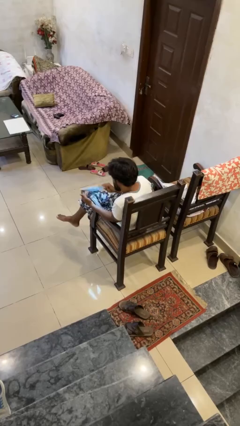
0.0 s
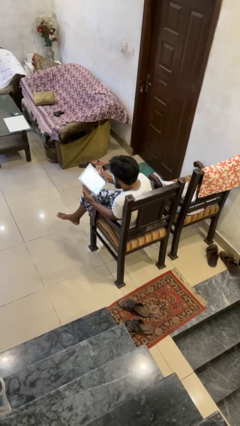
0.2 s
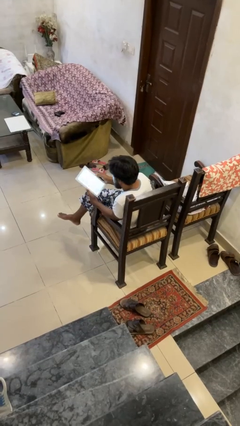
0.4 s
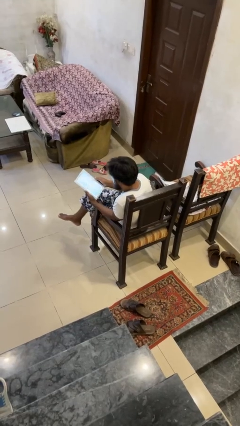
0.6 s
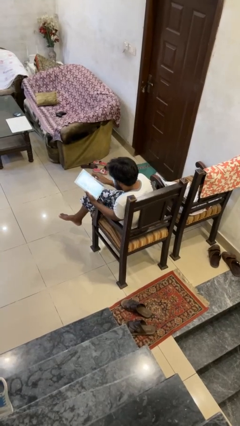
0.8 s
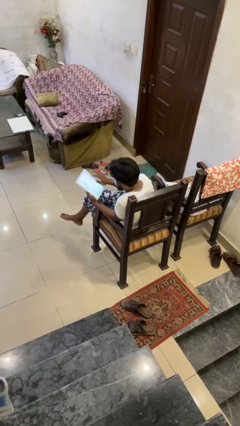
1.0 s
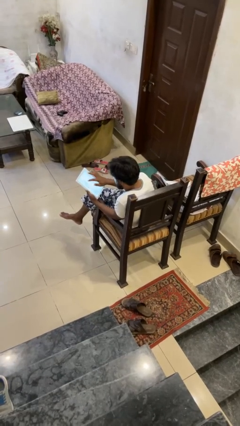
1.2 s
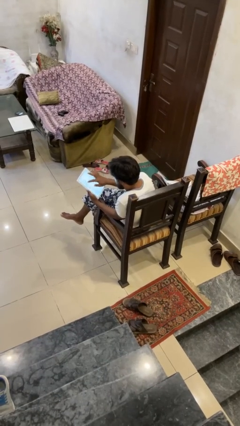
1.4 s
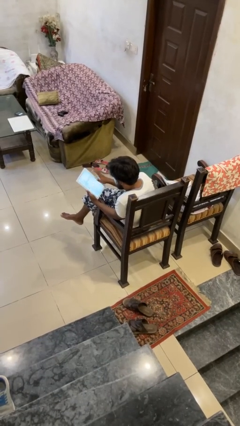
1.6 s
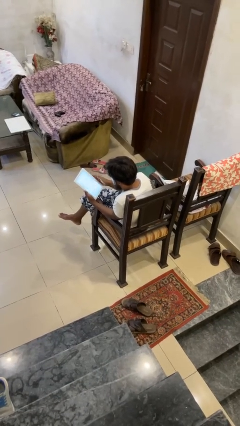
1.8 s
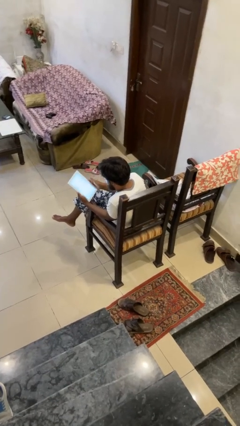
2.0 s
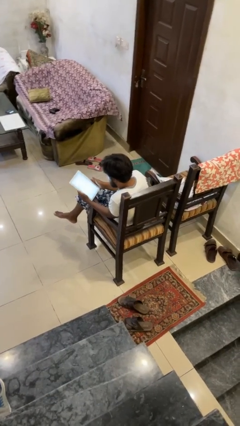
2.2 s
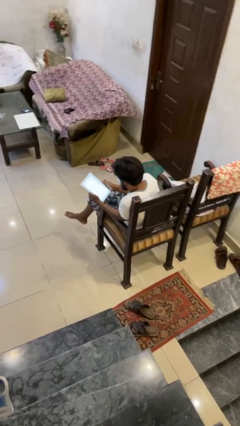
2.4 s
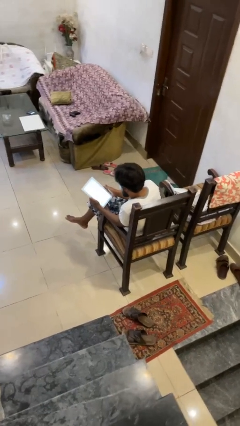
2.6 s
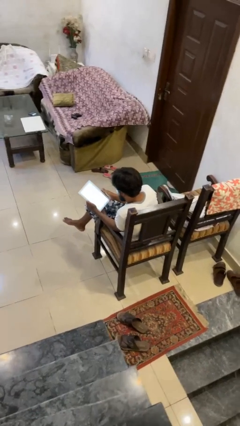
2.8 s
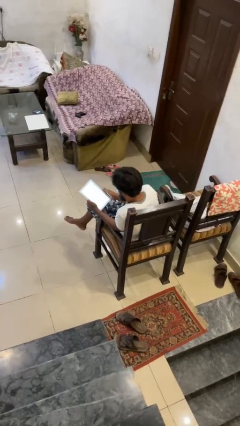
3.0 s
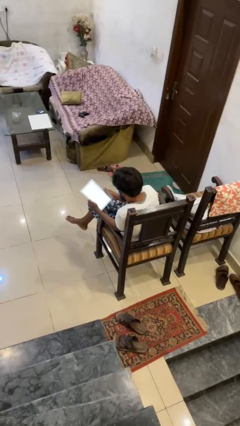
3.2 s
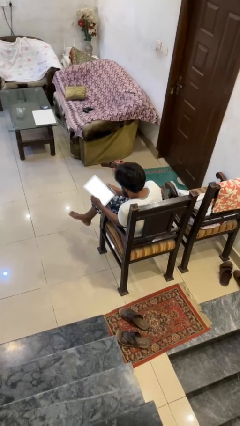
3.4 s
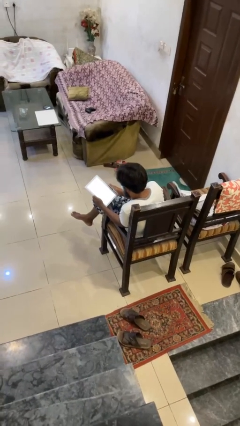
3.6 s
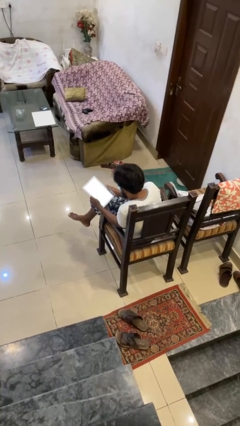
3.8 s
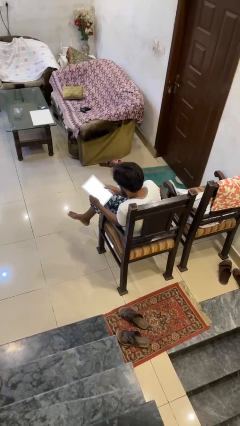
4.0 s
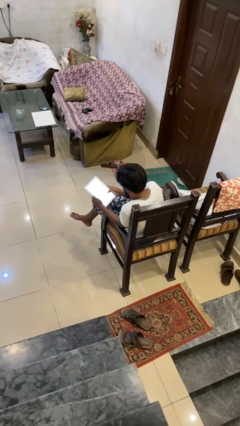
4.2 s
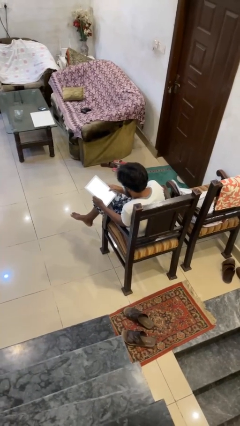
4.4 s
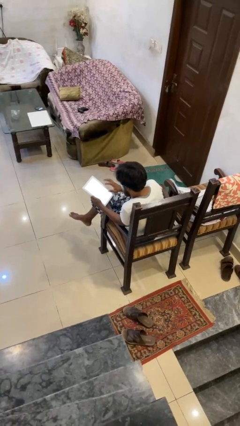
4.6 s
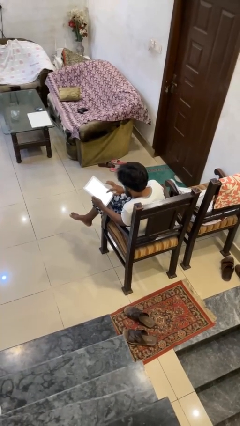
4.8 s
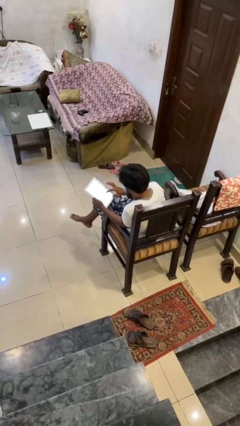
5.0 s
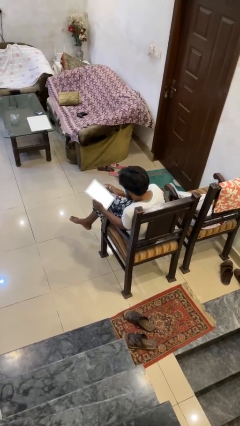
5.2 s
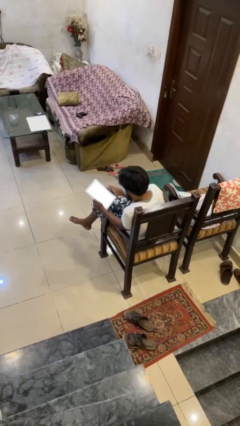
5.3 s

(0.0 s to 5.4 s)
person interacts with tablet

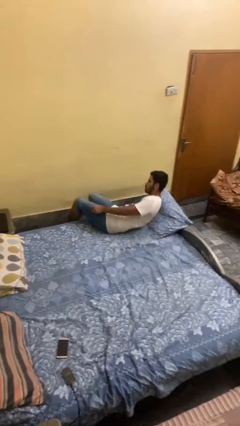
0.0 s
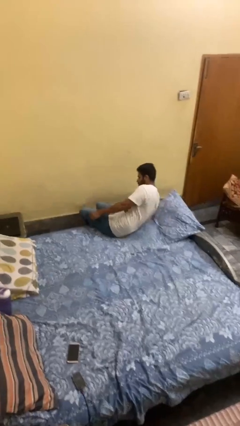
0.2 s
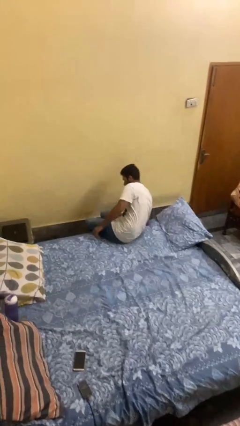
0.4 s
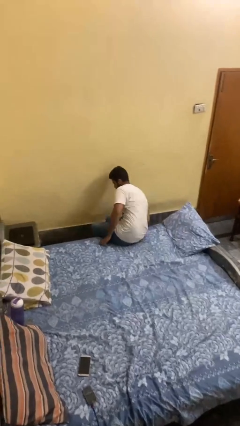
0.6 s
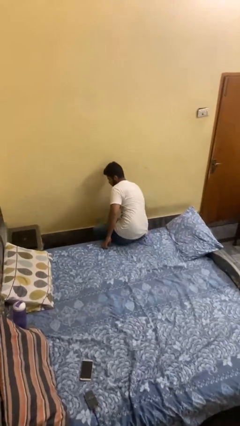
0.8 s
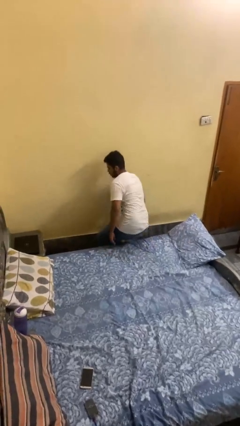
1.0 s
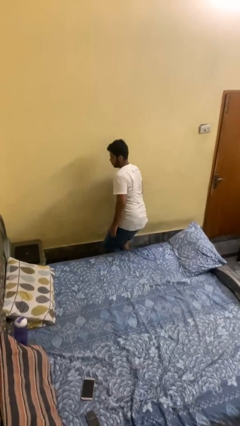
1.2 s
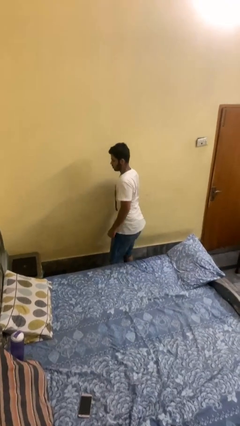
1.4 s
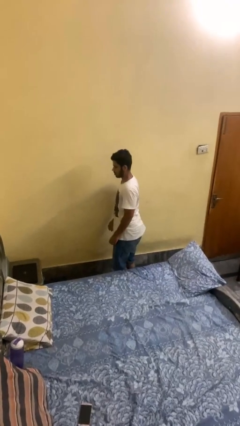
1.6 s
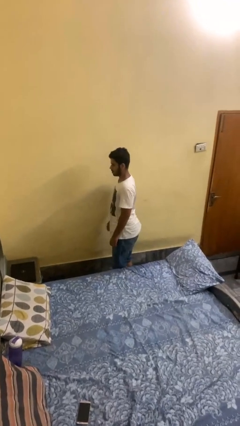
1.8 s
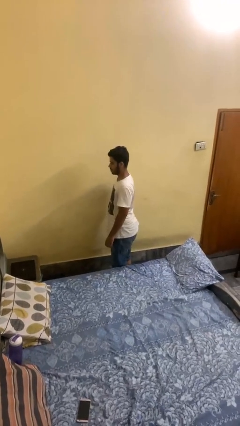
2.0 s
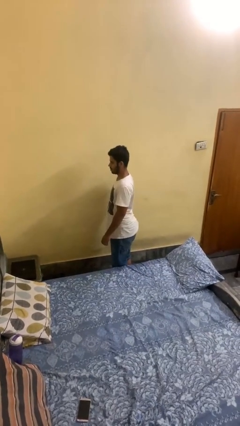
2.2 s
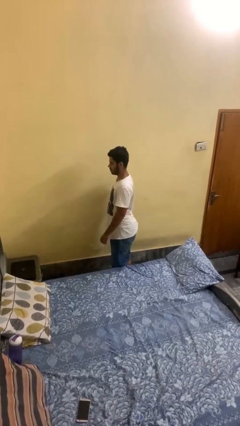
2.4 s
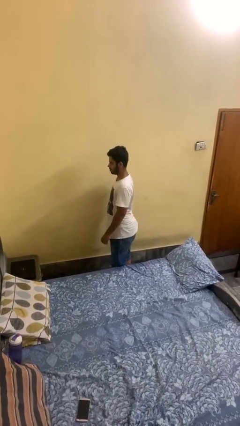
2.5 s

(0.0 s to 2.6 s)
person stands up

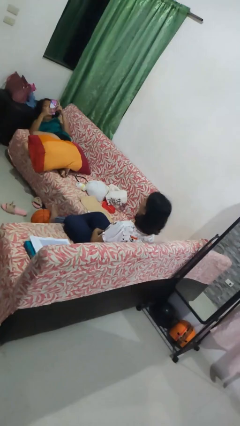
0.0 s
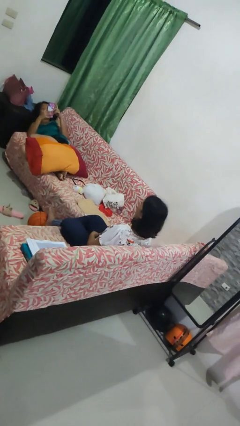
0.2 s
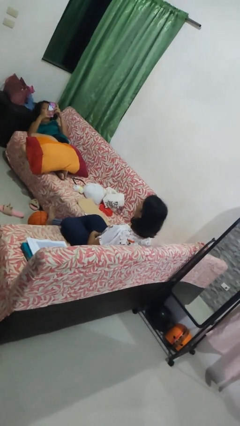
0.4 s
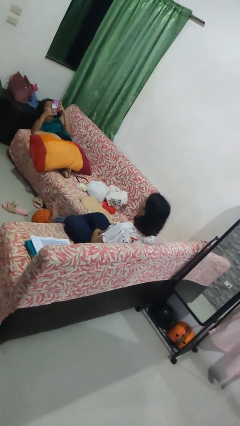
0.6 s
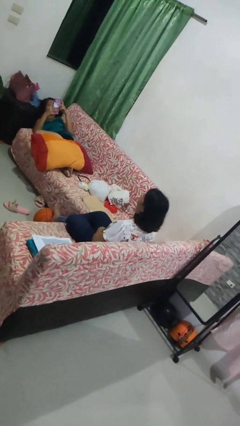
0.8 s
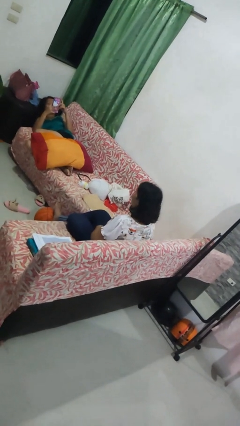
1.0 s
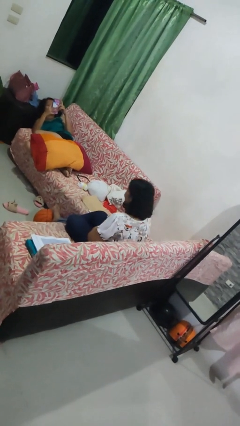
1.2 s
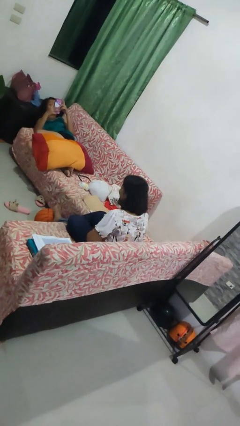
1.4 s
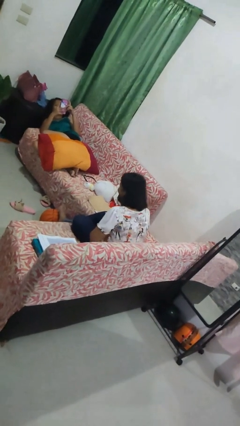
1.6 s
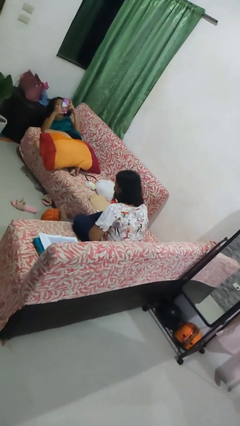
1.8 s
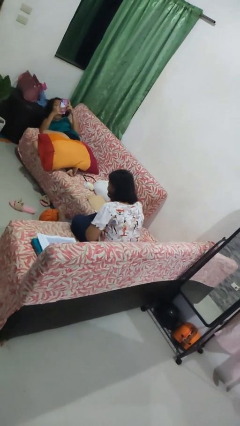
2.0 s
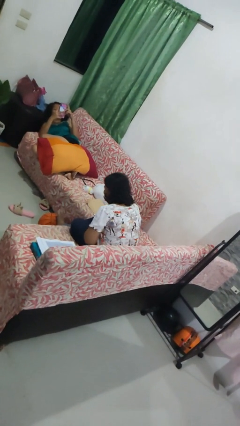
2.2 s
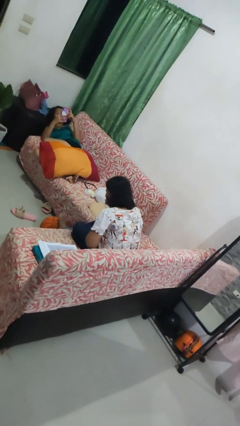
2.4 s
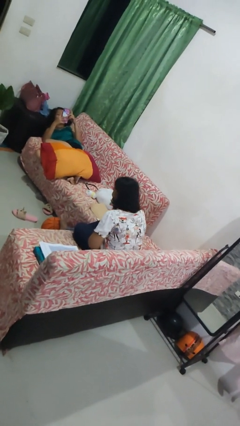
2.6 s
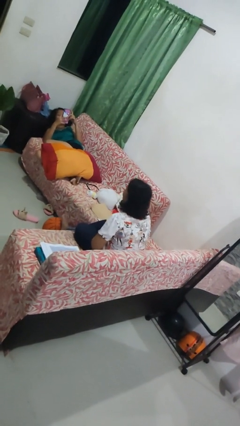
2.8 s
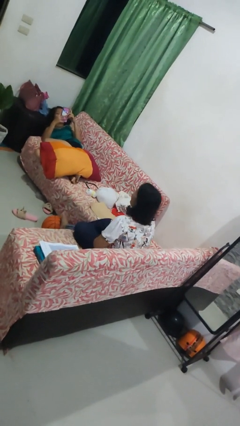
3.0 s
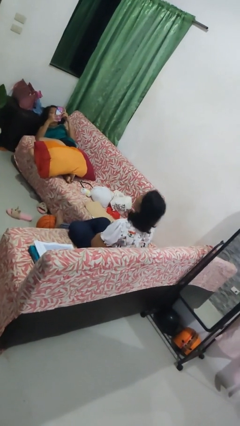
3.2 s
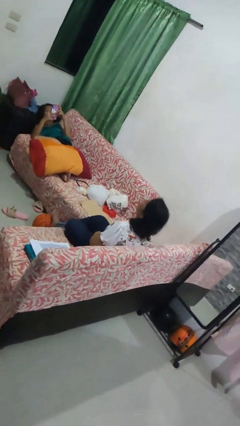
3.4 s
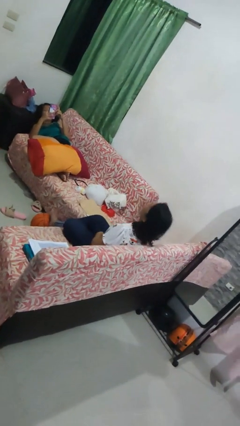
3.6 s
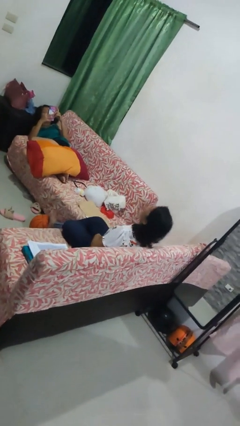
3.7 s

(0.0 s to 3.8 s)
person laughs with person

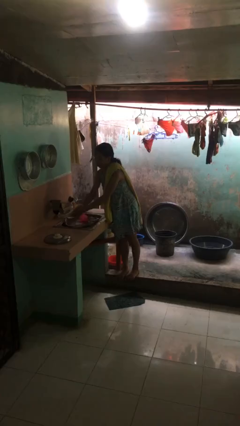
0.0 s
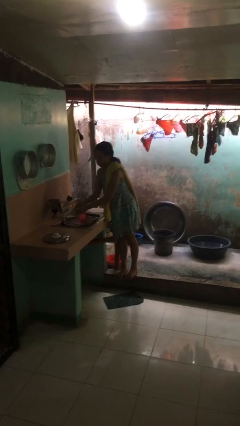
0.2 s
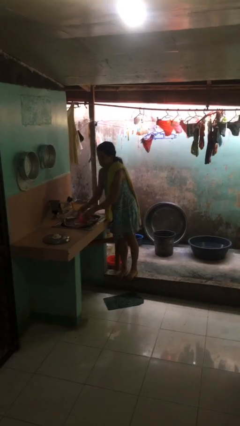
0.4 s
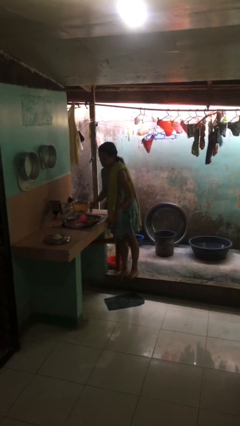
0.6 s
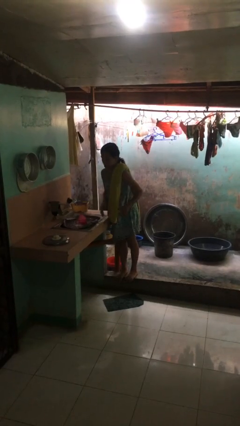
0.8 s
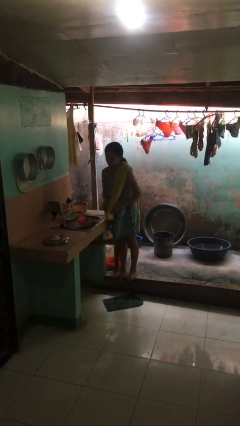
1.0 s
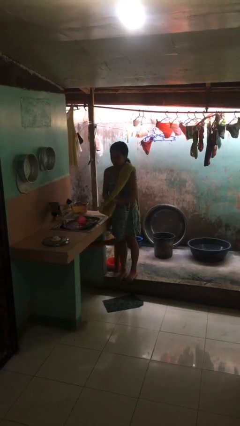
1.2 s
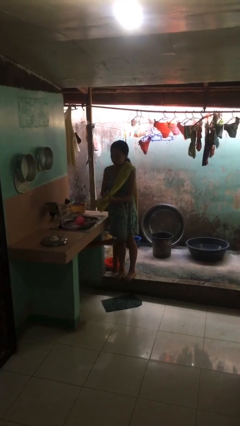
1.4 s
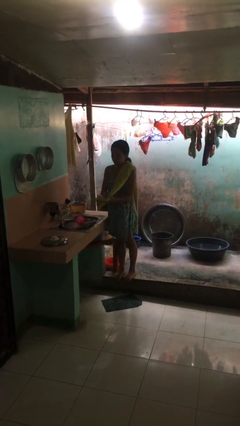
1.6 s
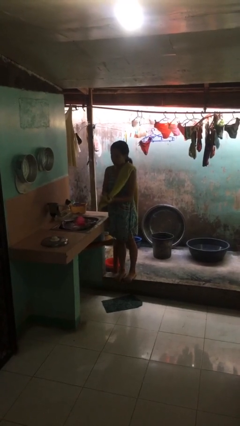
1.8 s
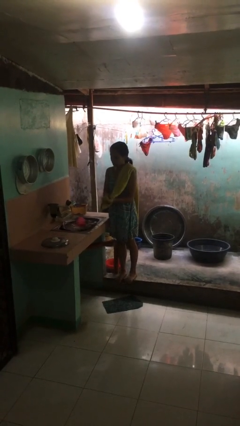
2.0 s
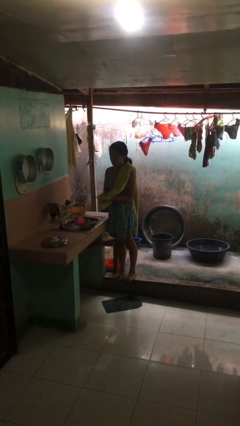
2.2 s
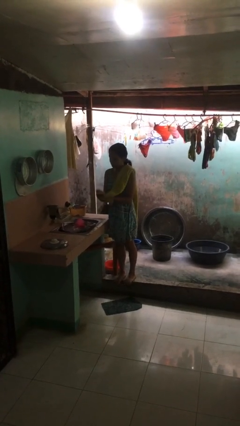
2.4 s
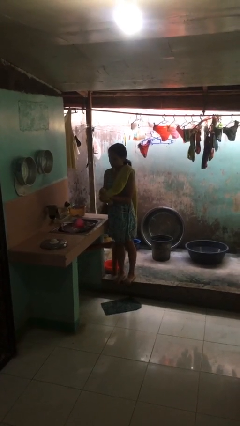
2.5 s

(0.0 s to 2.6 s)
person dries hands with towel

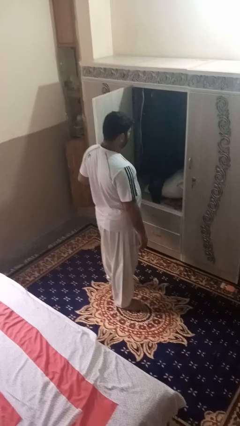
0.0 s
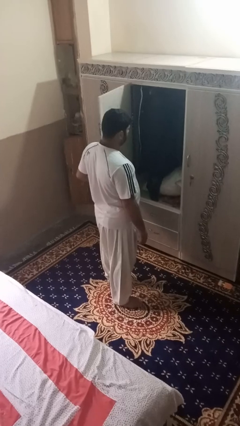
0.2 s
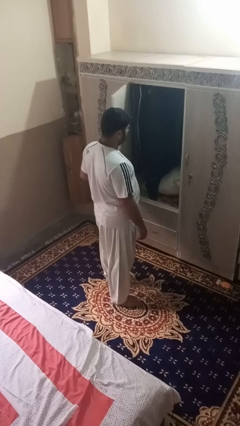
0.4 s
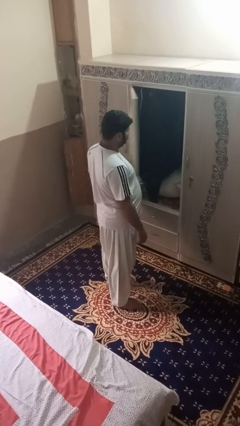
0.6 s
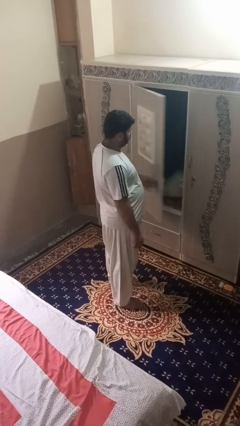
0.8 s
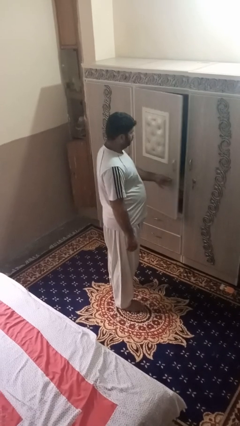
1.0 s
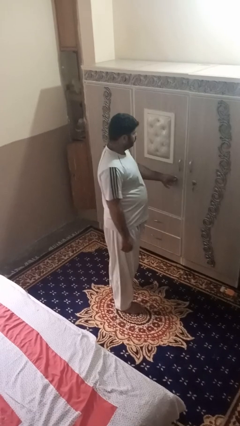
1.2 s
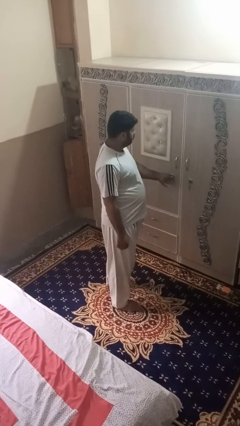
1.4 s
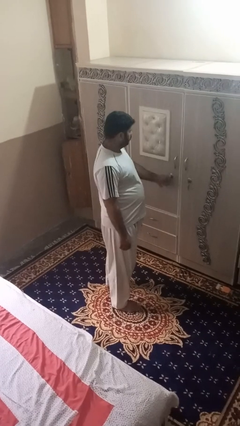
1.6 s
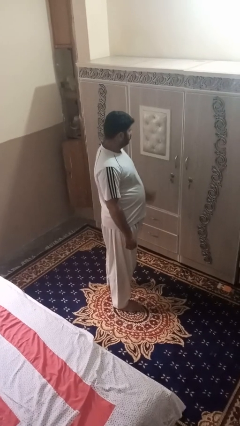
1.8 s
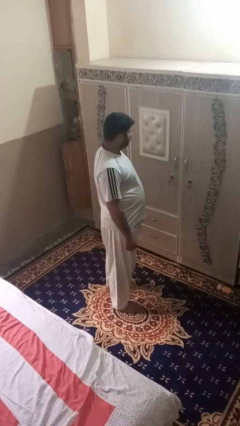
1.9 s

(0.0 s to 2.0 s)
person closes dresser drawer

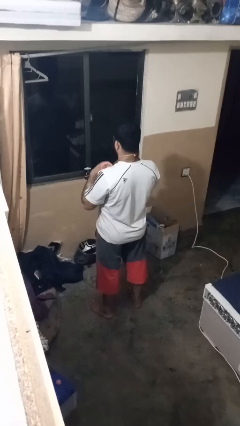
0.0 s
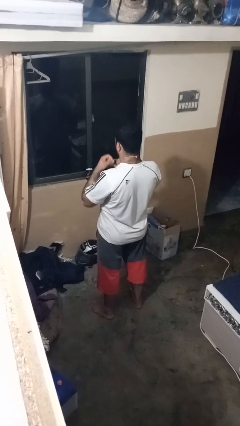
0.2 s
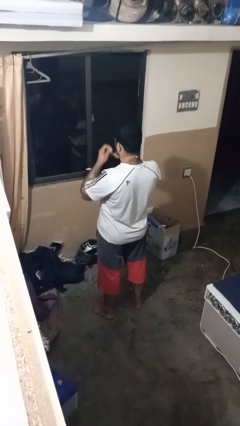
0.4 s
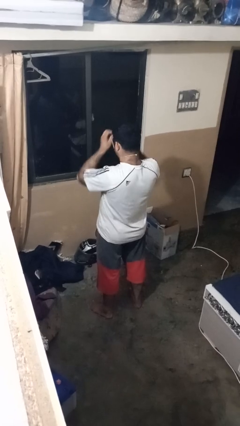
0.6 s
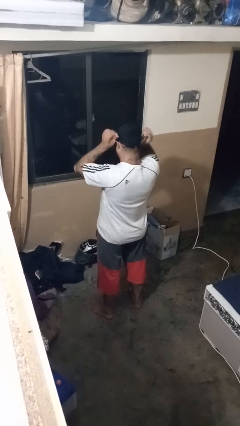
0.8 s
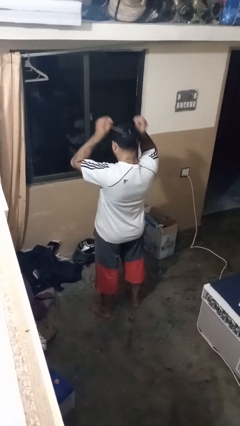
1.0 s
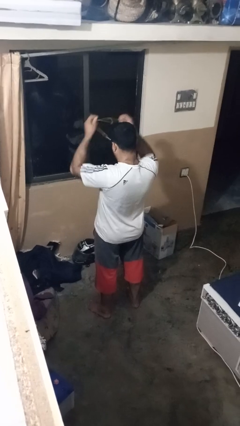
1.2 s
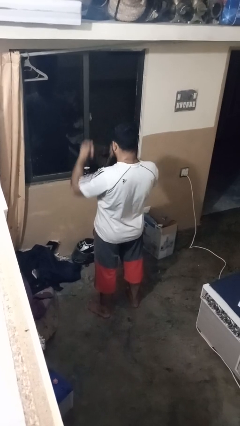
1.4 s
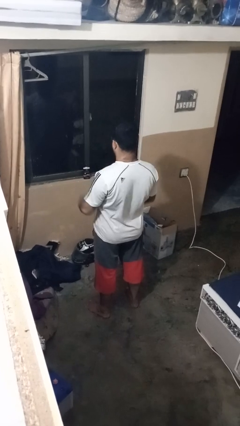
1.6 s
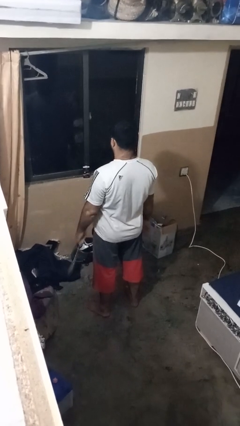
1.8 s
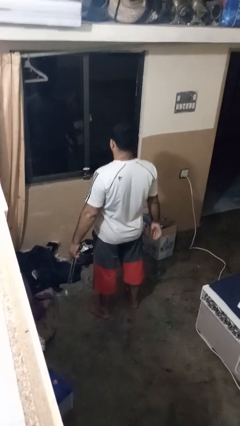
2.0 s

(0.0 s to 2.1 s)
person takes off necklace
